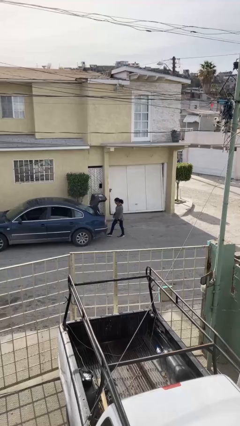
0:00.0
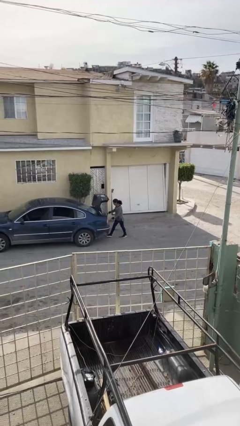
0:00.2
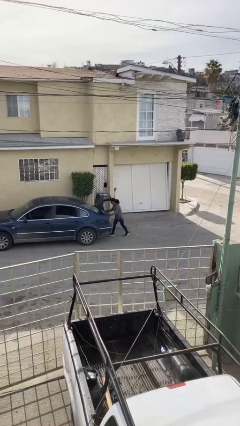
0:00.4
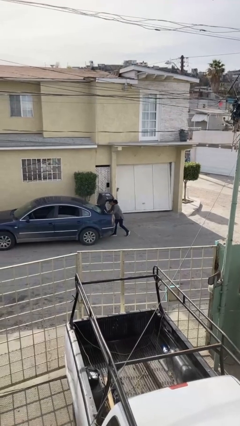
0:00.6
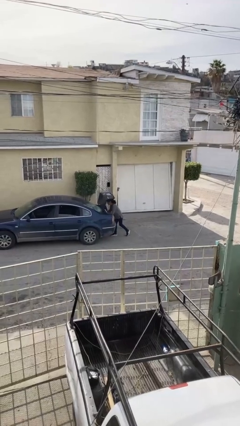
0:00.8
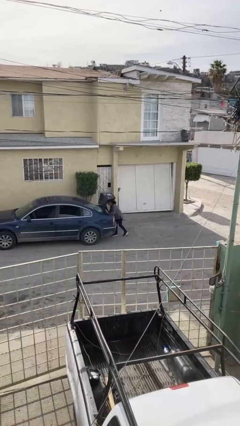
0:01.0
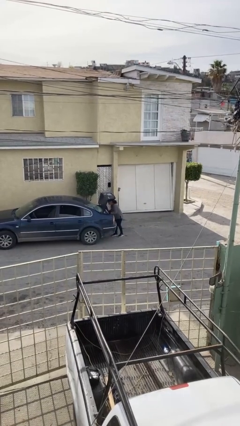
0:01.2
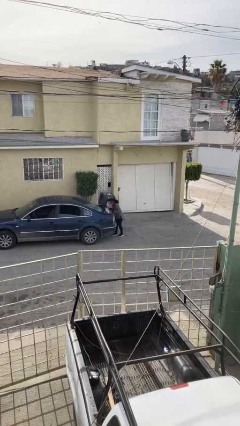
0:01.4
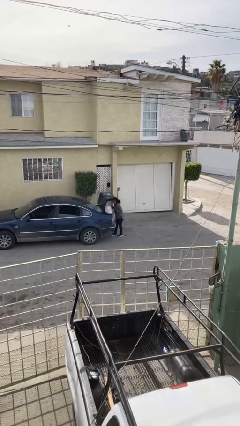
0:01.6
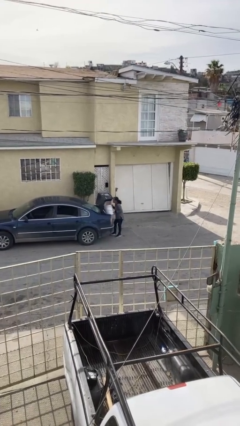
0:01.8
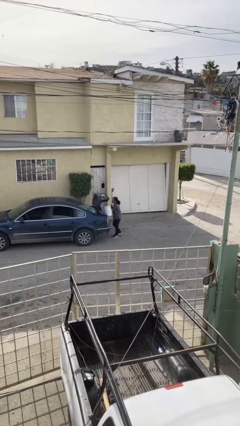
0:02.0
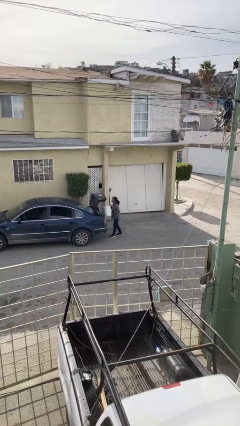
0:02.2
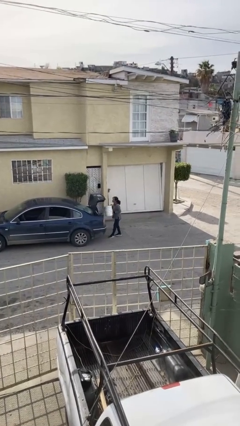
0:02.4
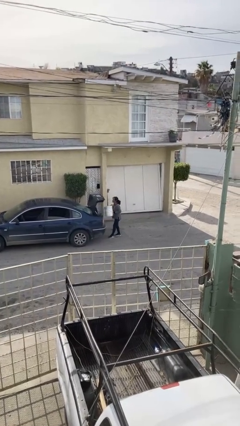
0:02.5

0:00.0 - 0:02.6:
person unloads car

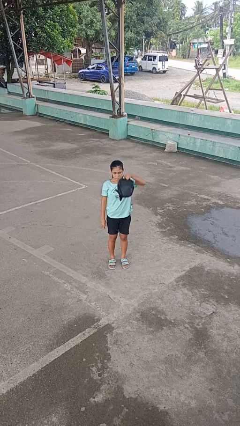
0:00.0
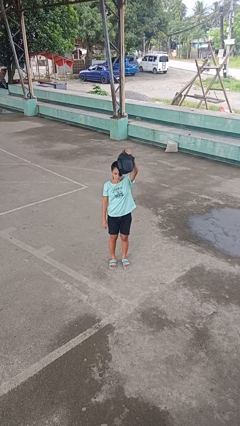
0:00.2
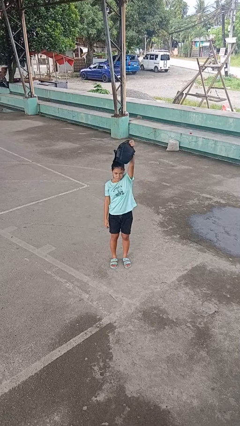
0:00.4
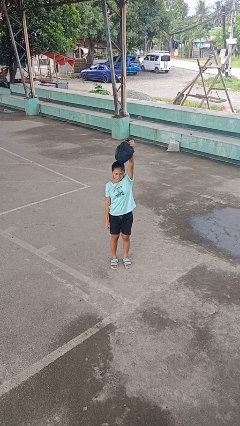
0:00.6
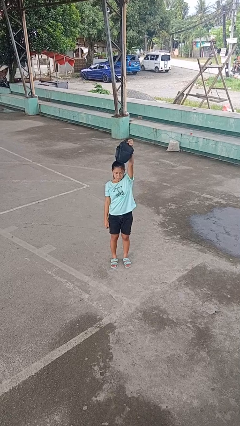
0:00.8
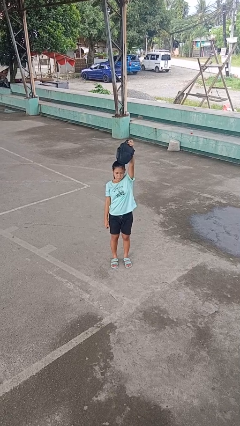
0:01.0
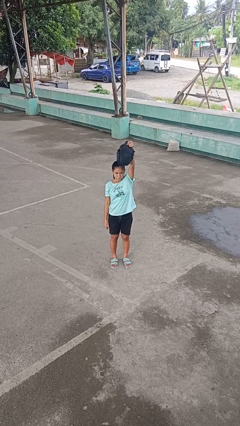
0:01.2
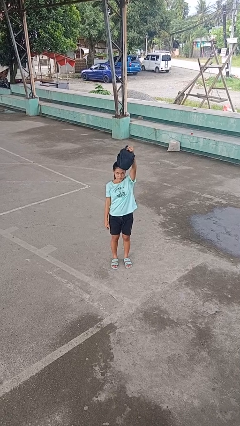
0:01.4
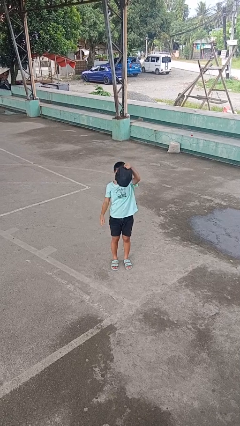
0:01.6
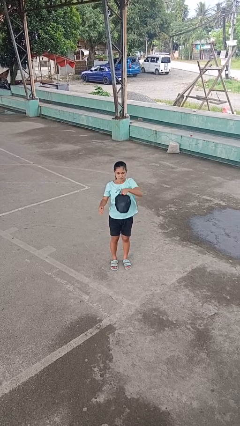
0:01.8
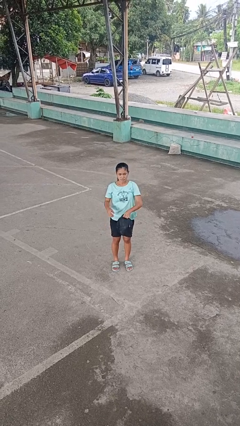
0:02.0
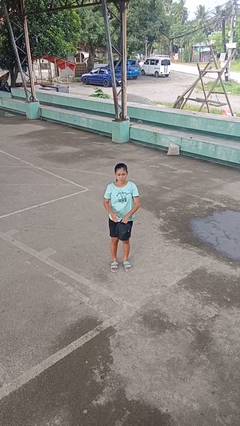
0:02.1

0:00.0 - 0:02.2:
person holds object above head

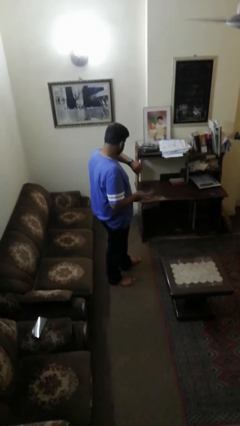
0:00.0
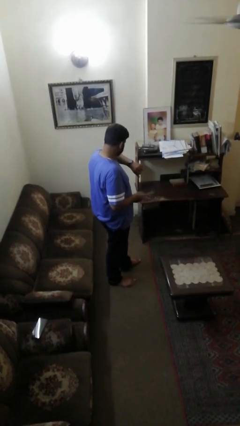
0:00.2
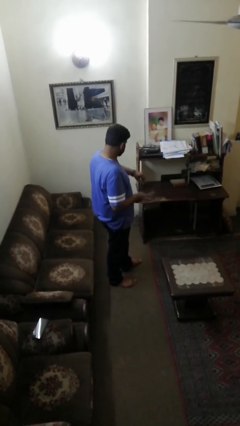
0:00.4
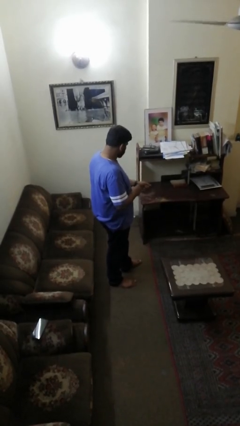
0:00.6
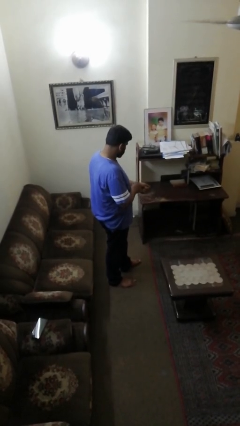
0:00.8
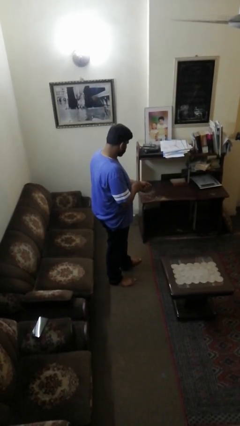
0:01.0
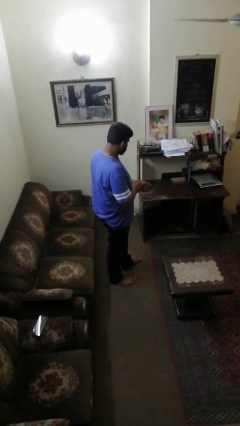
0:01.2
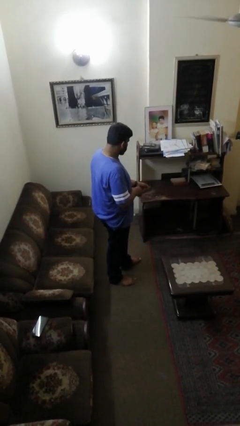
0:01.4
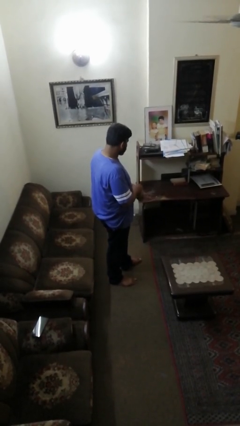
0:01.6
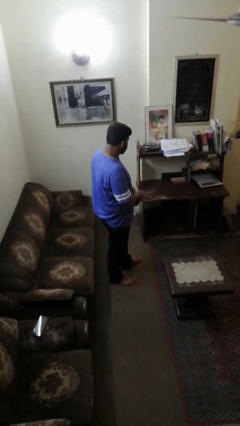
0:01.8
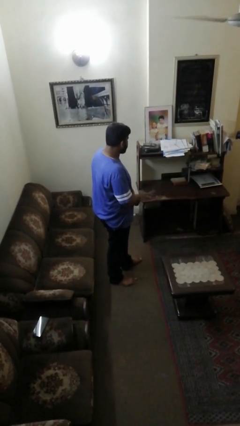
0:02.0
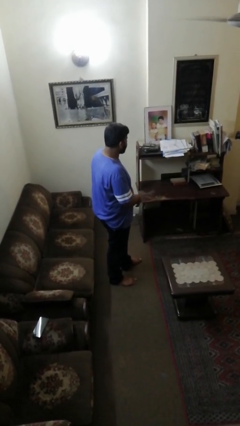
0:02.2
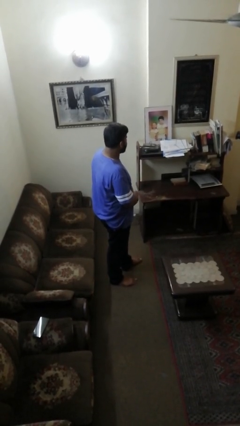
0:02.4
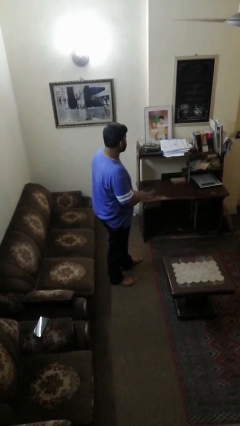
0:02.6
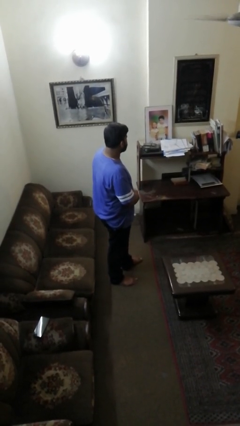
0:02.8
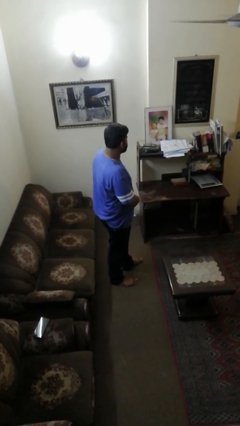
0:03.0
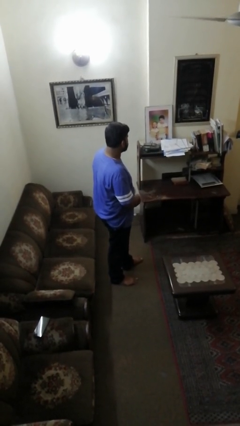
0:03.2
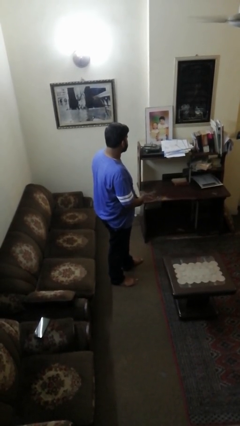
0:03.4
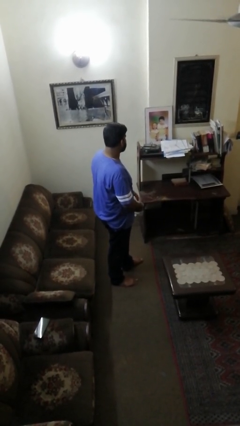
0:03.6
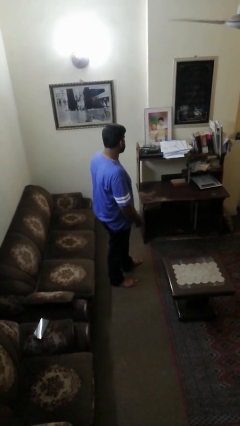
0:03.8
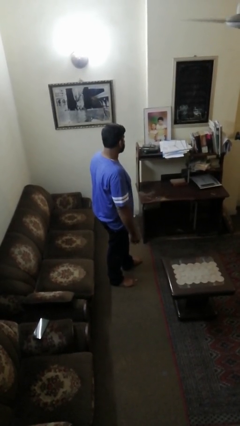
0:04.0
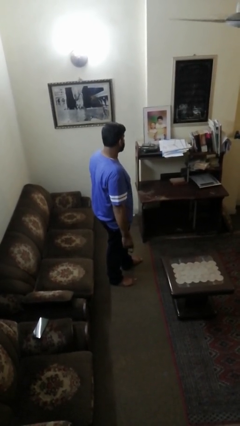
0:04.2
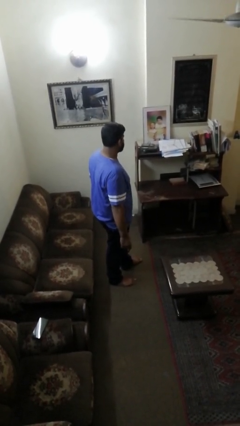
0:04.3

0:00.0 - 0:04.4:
person takes off wristwatch

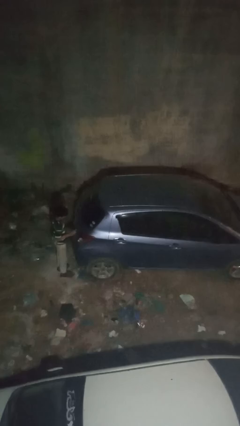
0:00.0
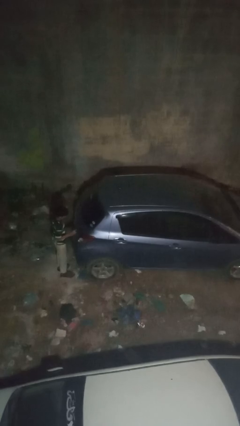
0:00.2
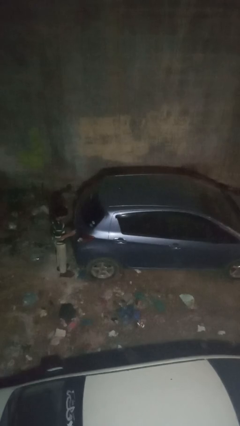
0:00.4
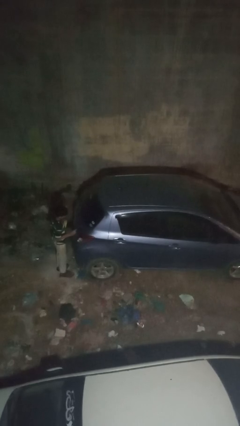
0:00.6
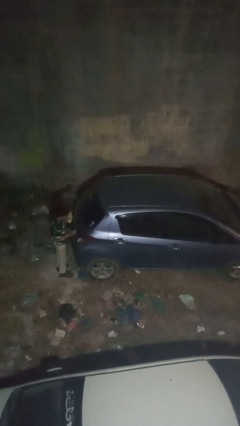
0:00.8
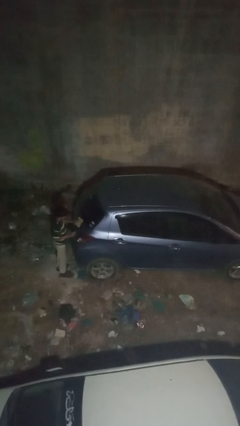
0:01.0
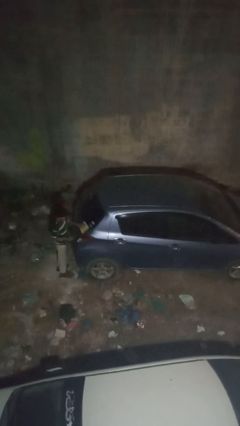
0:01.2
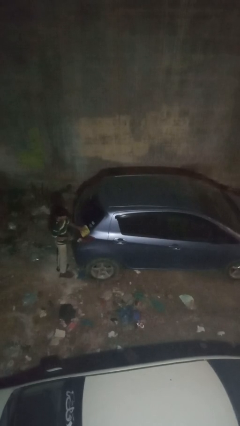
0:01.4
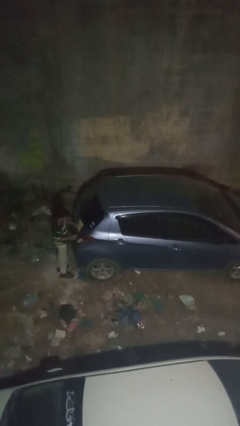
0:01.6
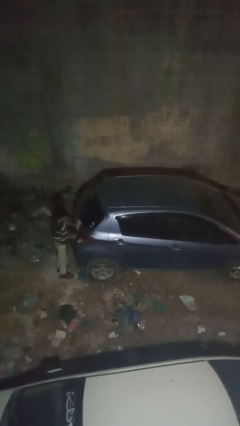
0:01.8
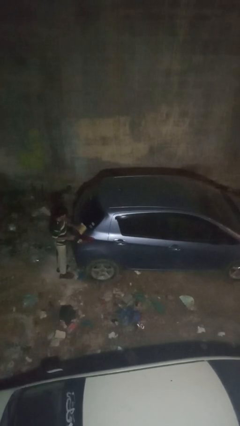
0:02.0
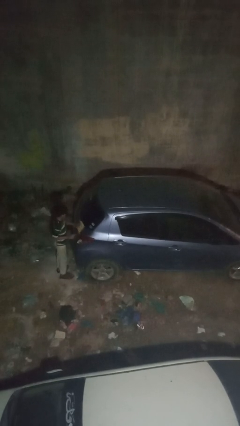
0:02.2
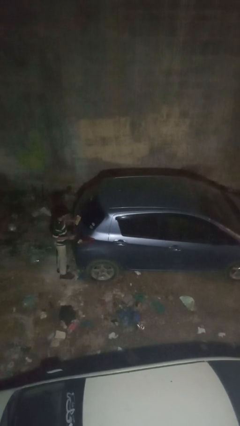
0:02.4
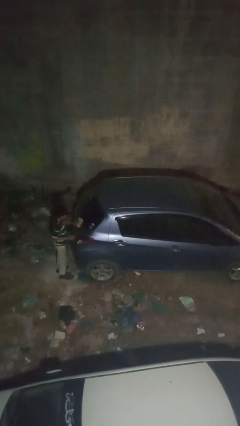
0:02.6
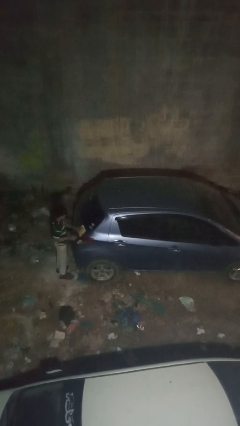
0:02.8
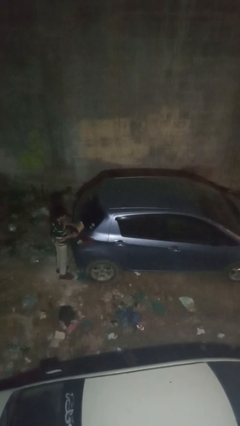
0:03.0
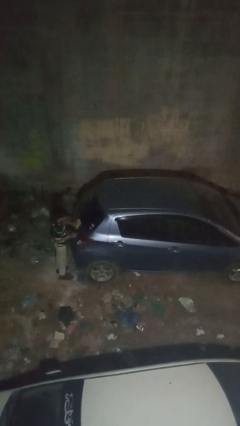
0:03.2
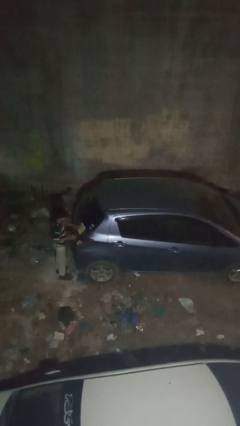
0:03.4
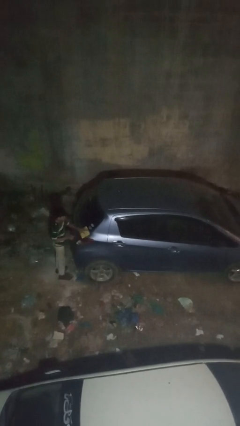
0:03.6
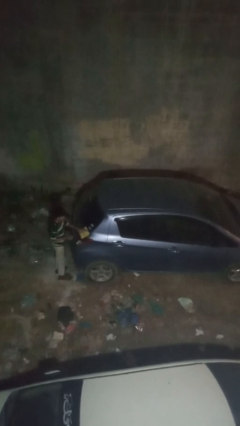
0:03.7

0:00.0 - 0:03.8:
person polishes car with rag

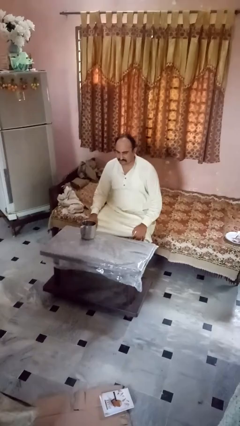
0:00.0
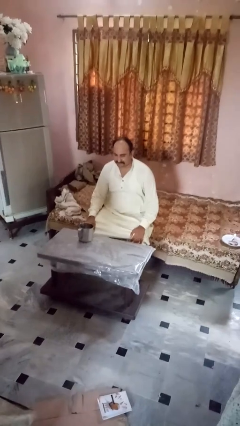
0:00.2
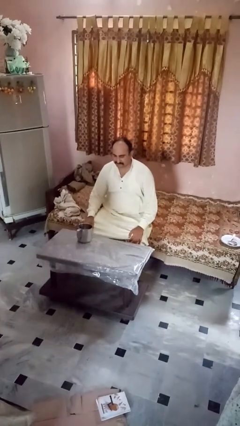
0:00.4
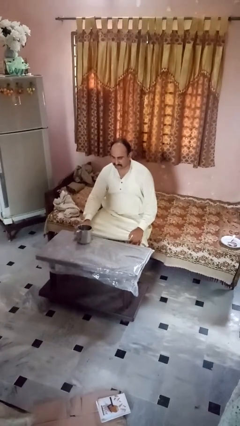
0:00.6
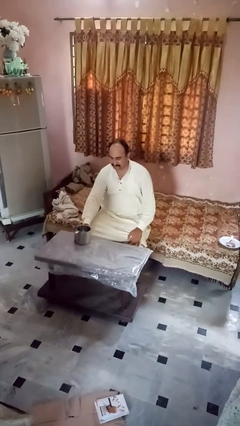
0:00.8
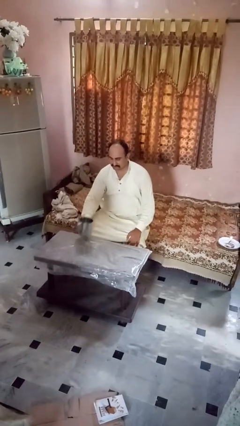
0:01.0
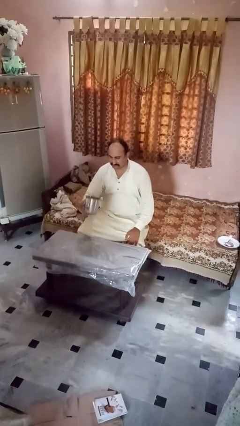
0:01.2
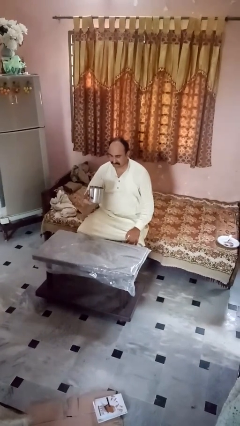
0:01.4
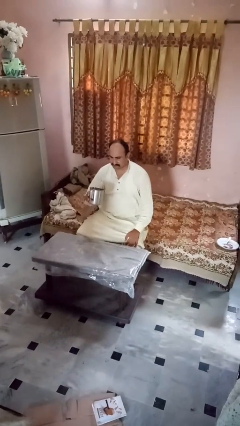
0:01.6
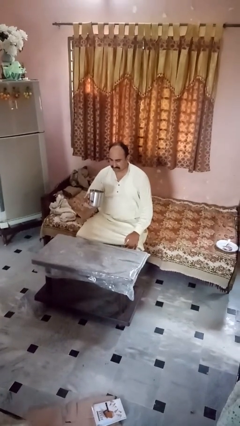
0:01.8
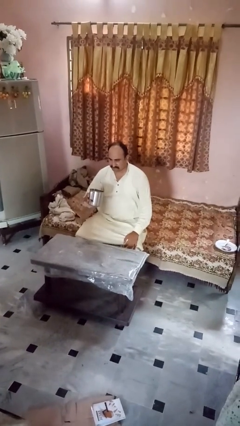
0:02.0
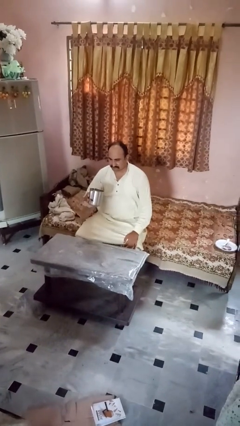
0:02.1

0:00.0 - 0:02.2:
person picks up object from table

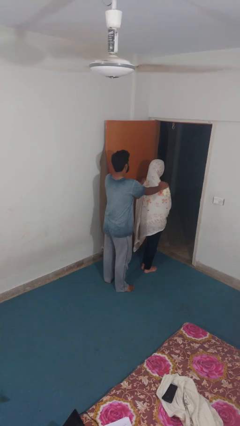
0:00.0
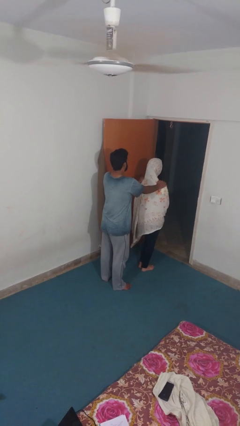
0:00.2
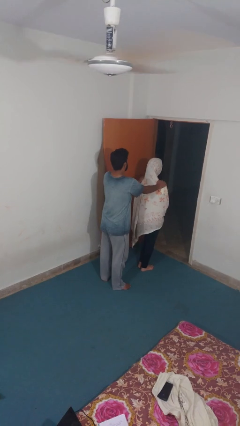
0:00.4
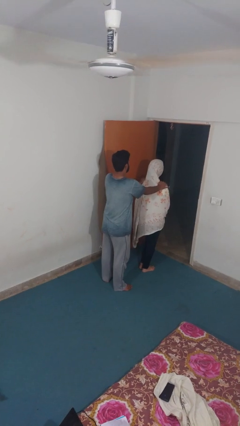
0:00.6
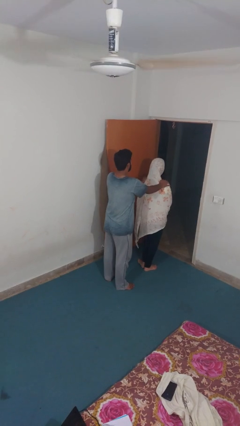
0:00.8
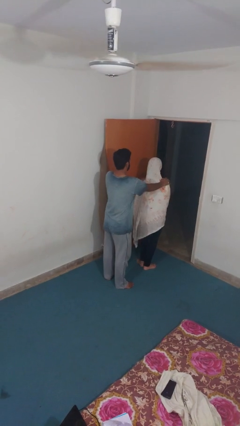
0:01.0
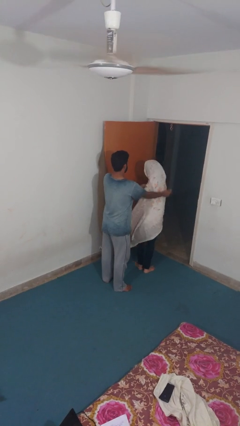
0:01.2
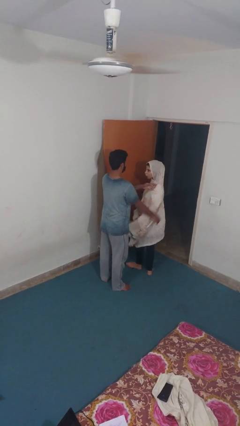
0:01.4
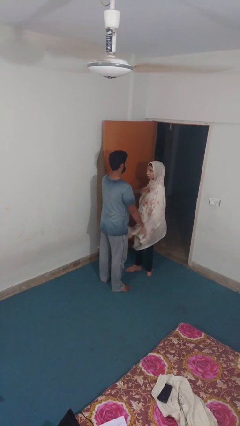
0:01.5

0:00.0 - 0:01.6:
person spins person around

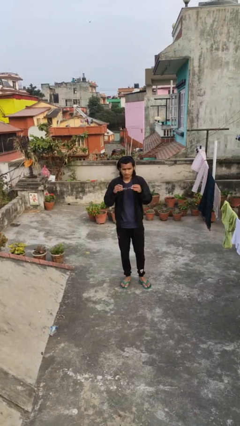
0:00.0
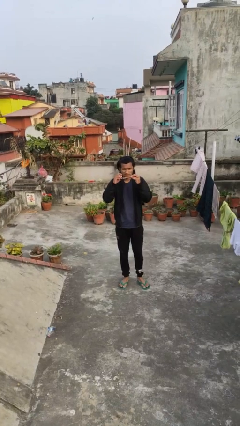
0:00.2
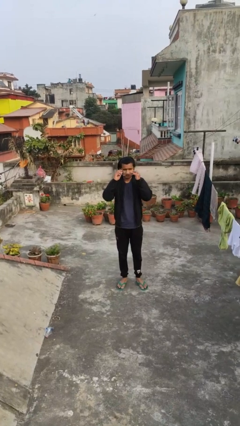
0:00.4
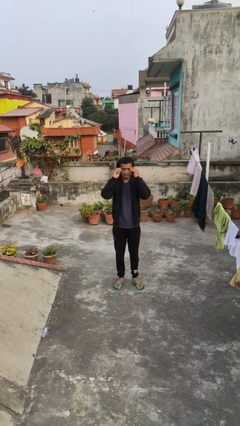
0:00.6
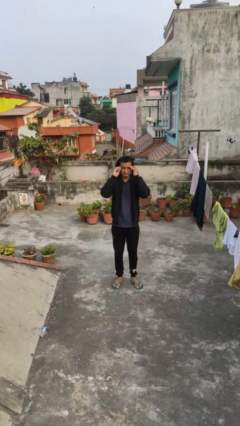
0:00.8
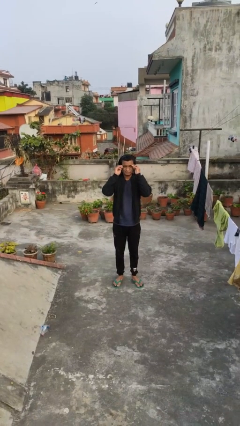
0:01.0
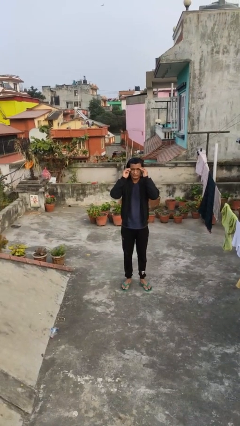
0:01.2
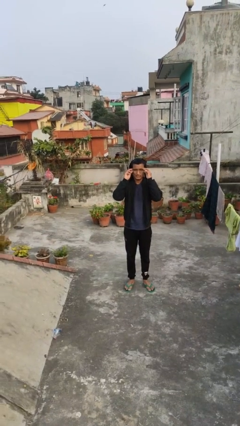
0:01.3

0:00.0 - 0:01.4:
person puts on glasses
